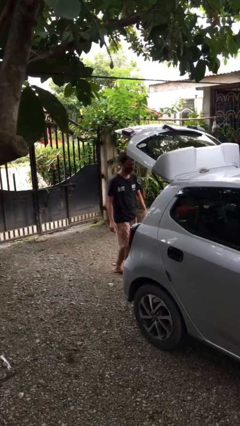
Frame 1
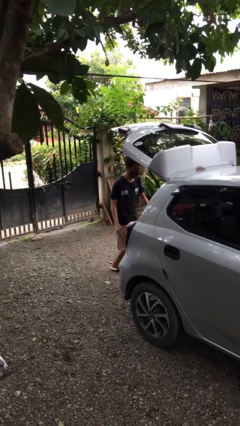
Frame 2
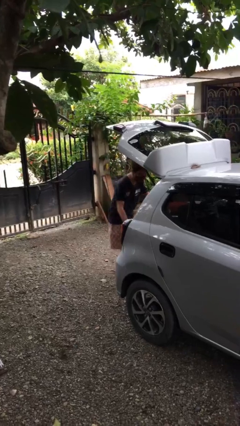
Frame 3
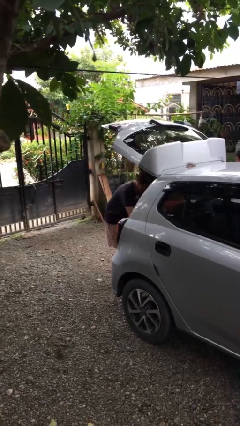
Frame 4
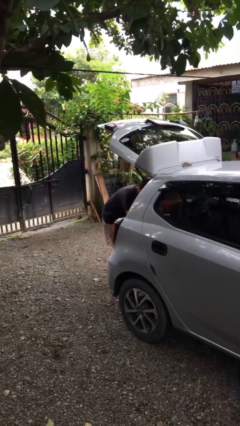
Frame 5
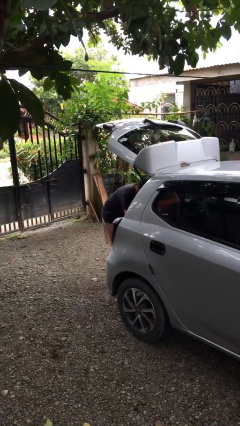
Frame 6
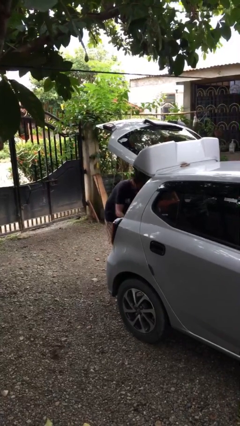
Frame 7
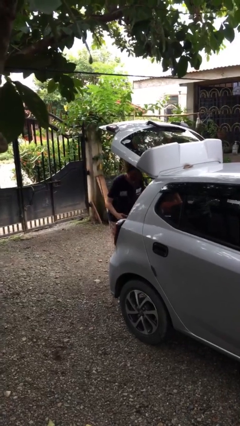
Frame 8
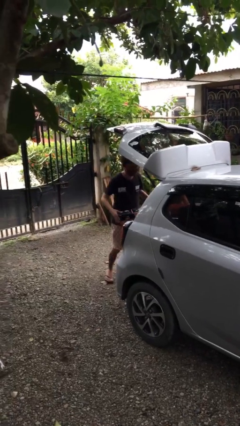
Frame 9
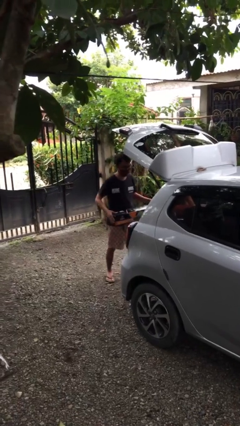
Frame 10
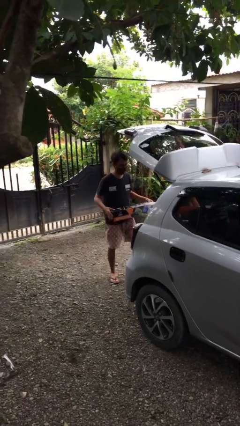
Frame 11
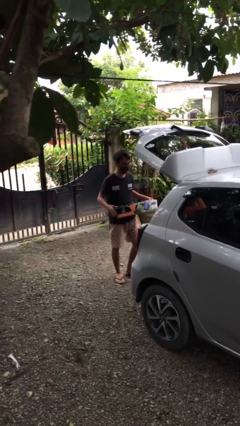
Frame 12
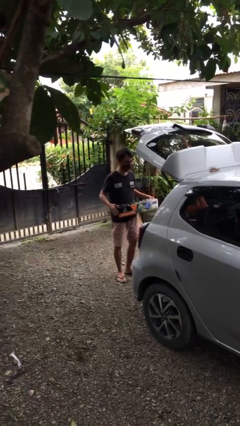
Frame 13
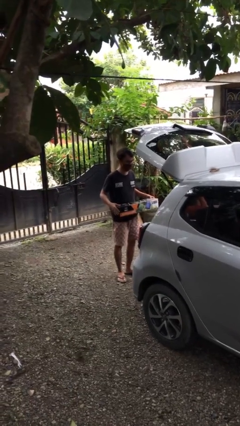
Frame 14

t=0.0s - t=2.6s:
person unloads car

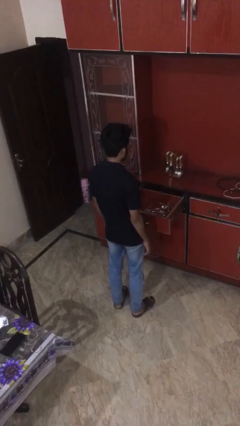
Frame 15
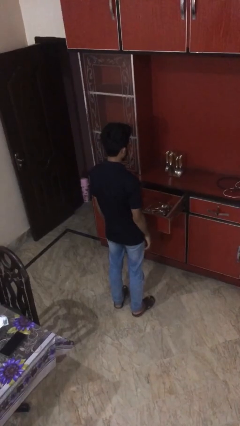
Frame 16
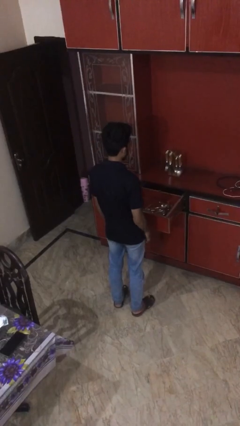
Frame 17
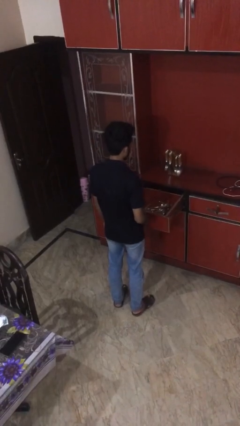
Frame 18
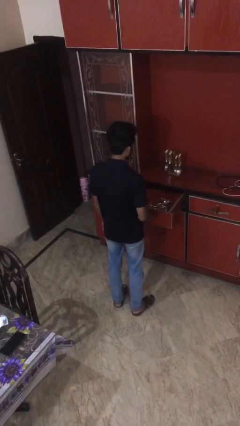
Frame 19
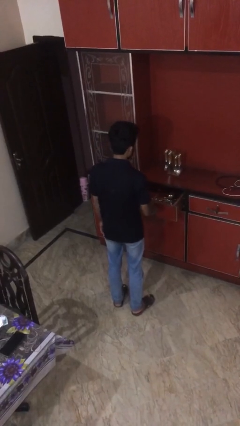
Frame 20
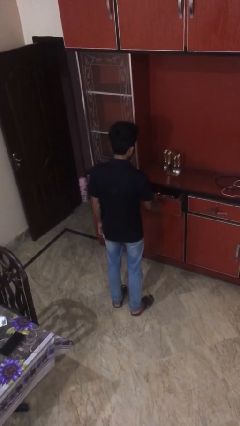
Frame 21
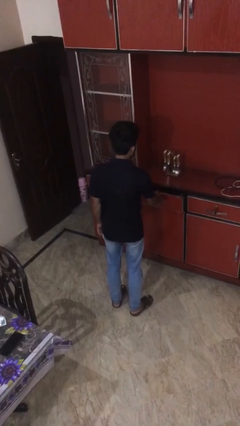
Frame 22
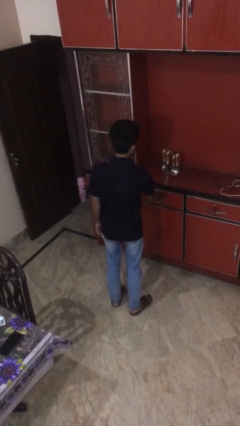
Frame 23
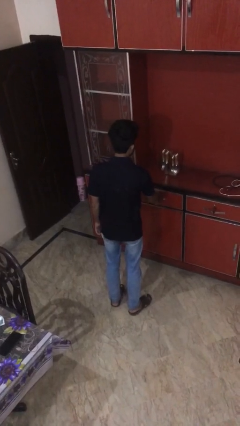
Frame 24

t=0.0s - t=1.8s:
person closes kitchen drawer

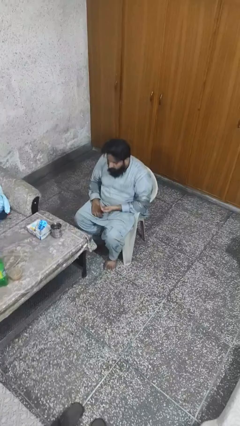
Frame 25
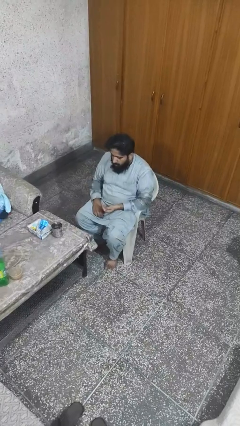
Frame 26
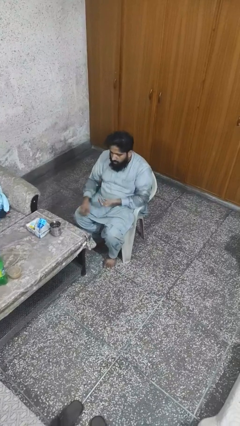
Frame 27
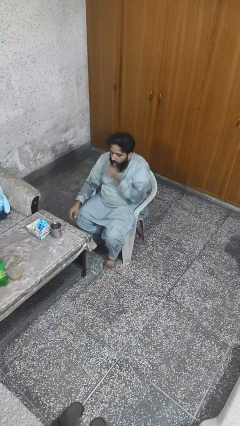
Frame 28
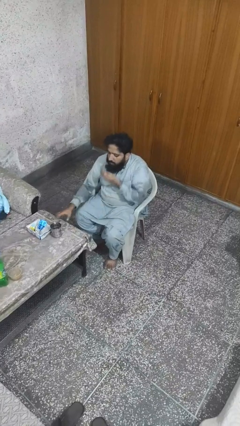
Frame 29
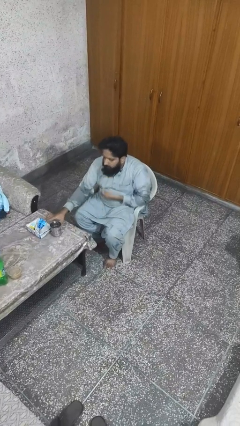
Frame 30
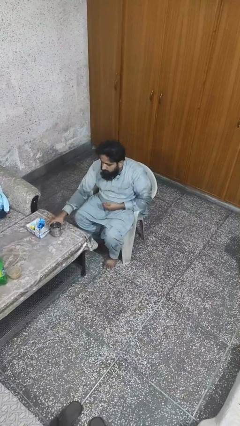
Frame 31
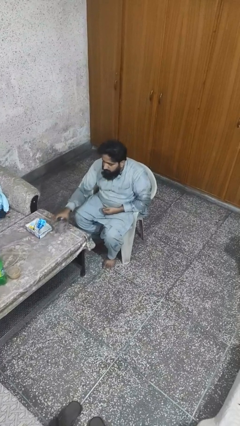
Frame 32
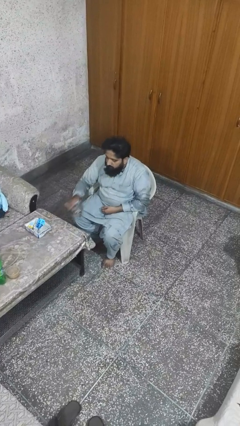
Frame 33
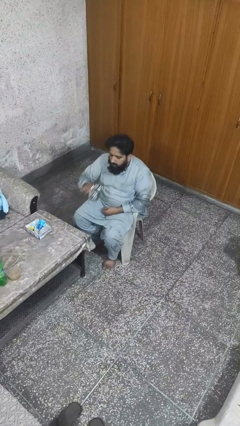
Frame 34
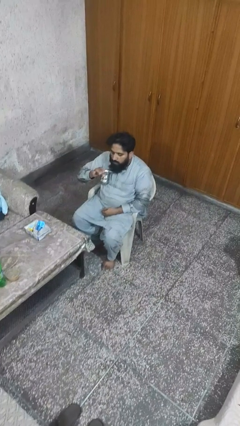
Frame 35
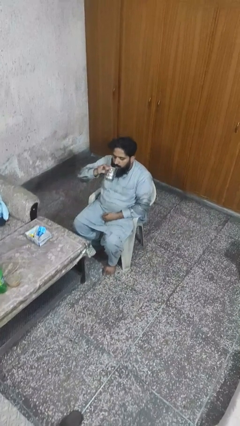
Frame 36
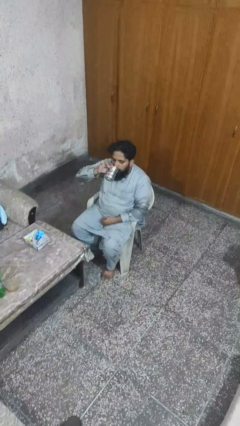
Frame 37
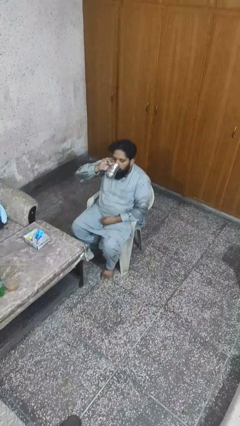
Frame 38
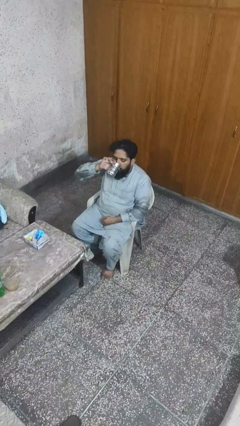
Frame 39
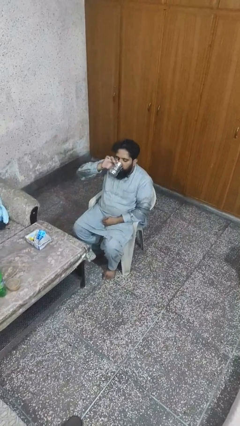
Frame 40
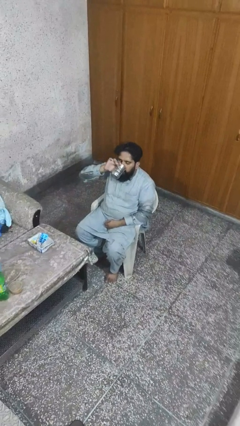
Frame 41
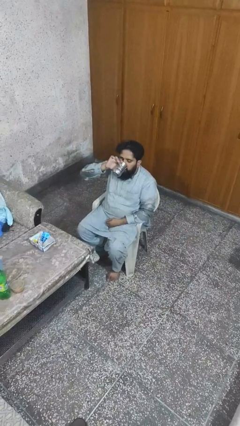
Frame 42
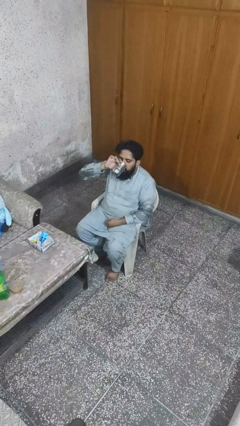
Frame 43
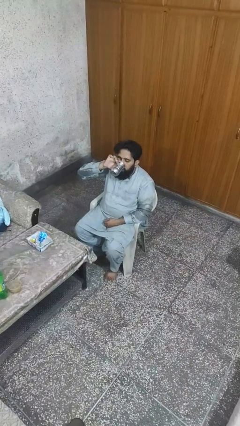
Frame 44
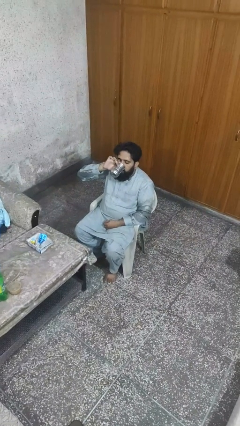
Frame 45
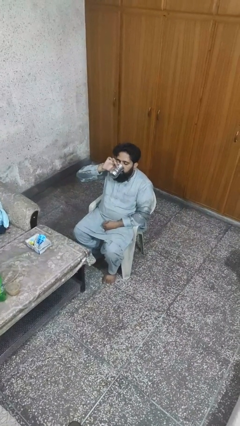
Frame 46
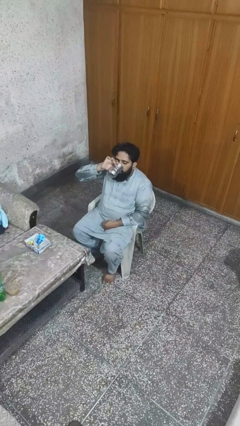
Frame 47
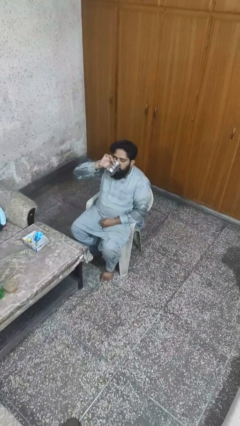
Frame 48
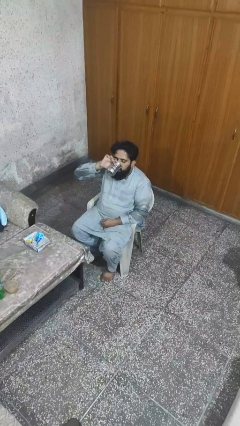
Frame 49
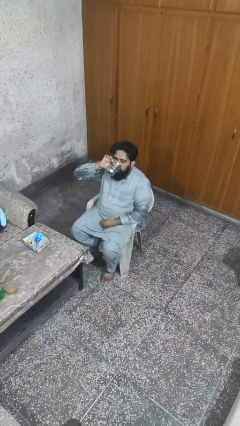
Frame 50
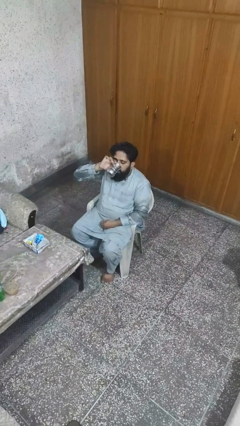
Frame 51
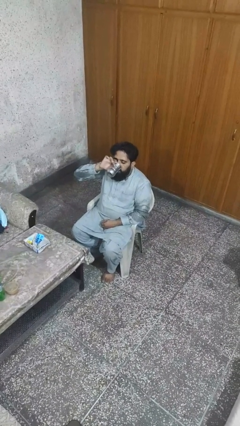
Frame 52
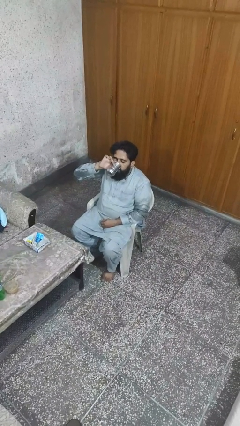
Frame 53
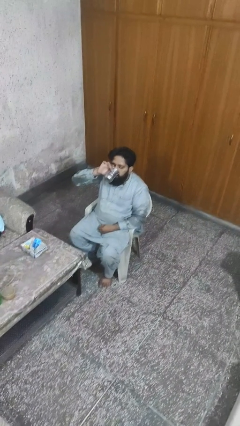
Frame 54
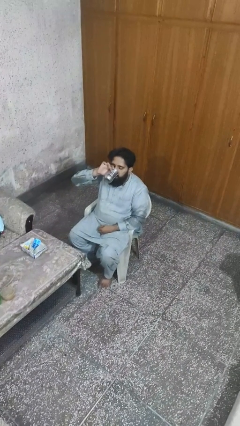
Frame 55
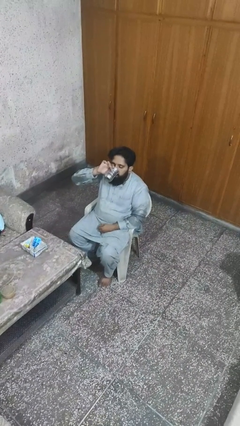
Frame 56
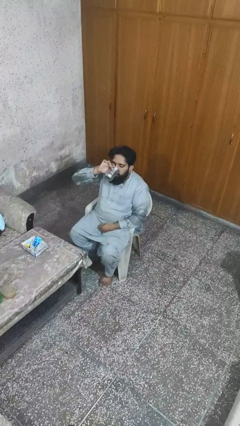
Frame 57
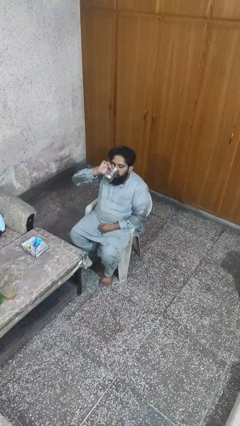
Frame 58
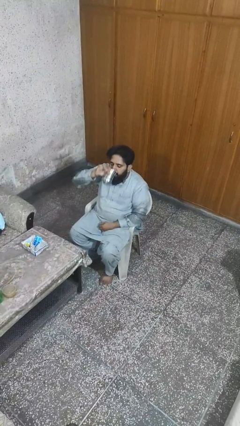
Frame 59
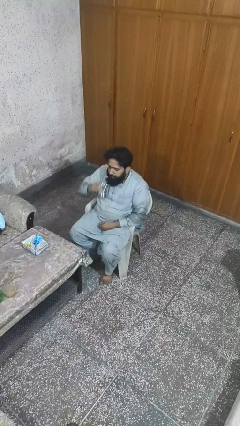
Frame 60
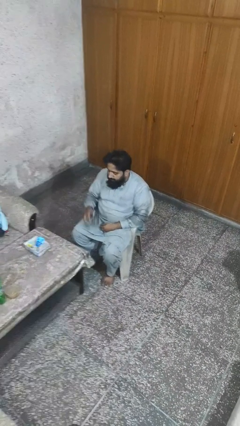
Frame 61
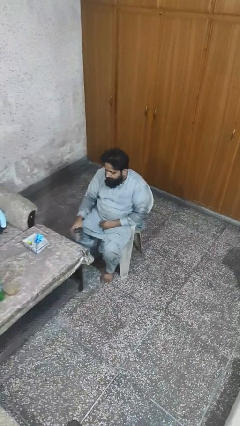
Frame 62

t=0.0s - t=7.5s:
person drinks from cup

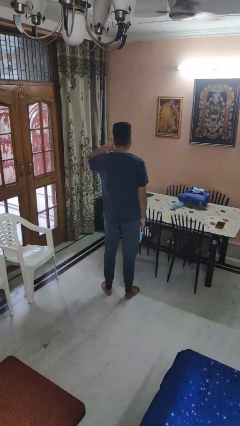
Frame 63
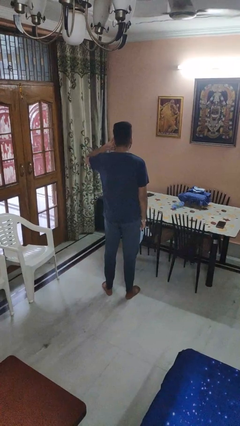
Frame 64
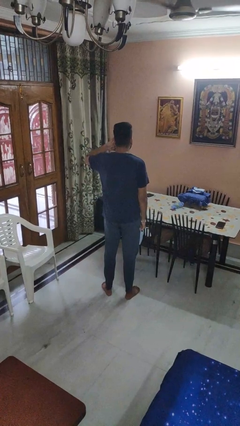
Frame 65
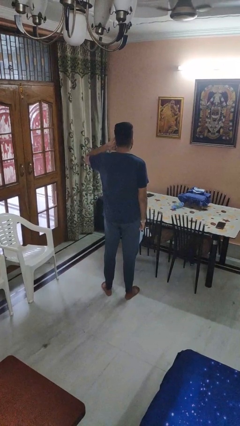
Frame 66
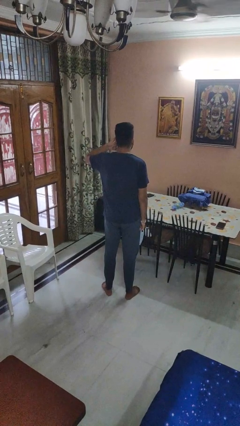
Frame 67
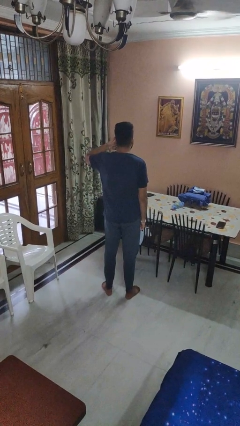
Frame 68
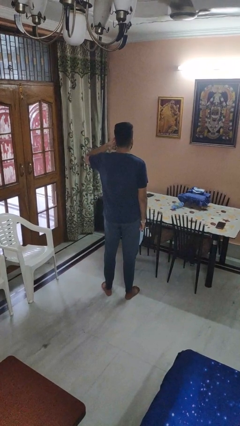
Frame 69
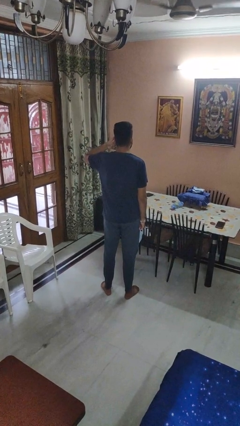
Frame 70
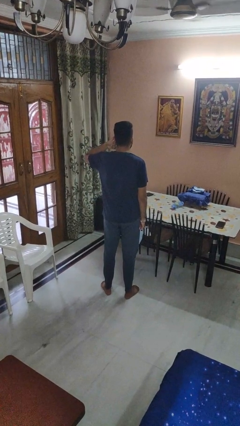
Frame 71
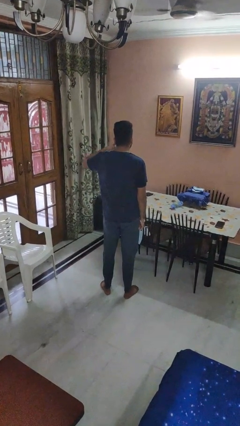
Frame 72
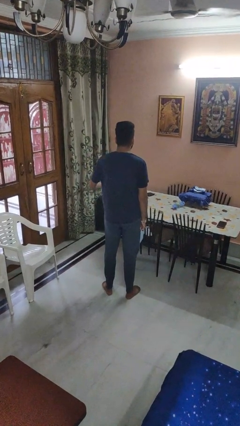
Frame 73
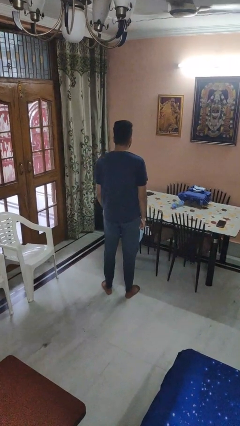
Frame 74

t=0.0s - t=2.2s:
person gestures call me

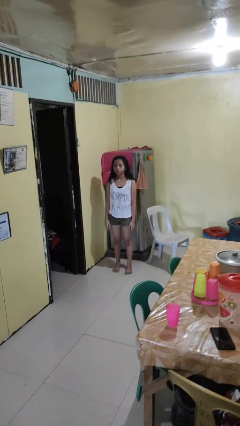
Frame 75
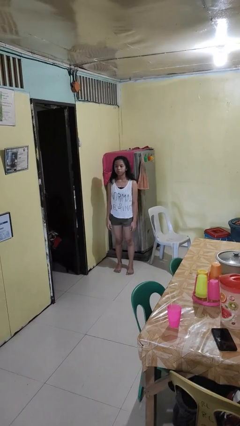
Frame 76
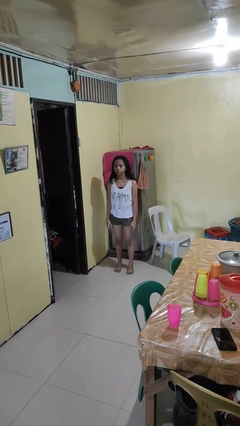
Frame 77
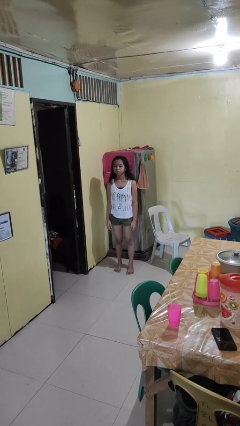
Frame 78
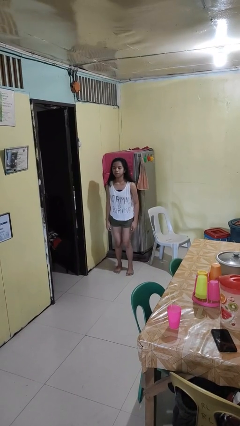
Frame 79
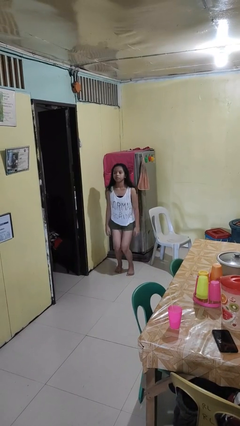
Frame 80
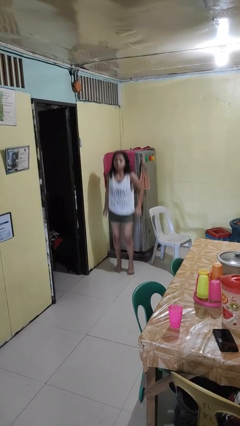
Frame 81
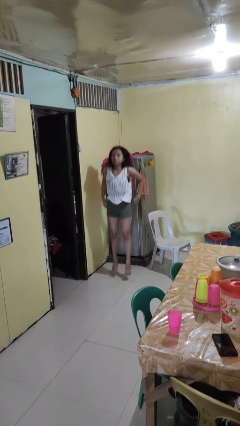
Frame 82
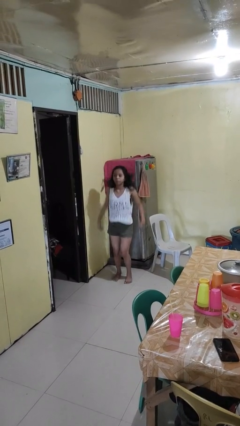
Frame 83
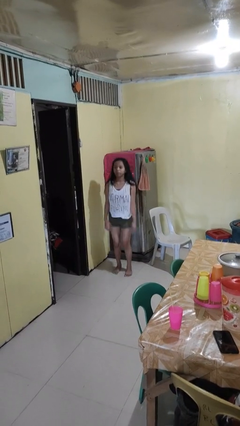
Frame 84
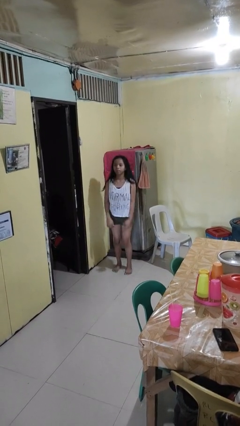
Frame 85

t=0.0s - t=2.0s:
person jumps

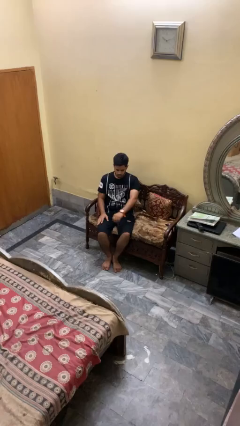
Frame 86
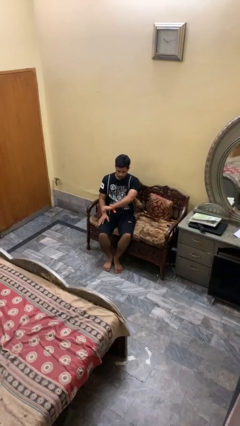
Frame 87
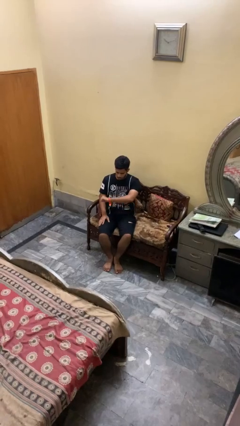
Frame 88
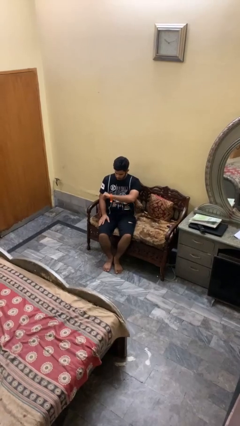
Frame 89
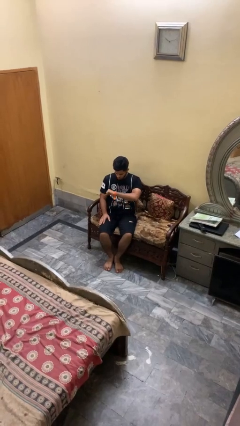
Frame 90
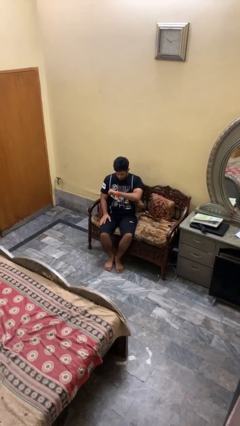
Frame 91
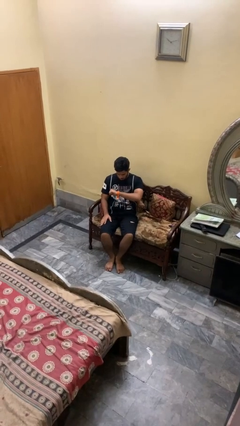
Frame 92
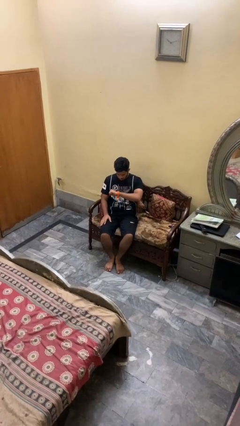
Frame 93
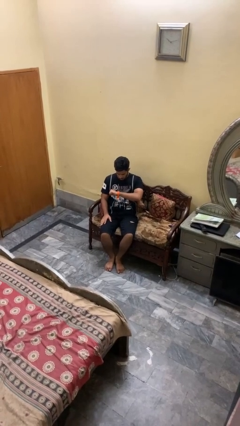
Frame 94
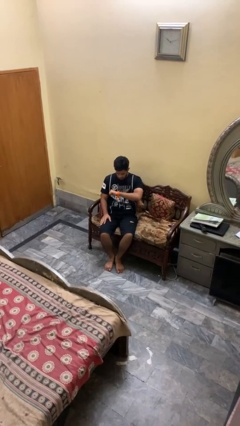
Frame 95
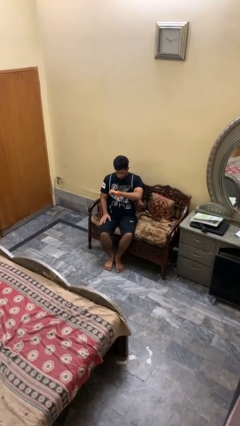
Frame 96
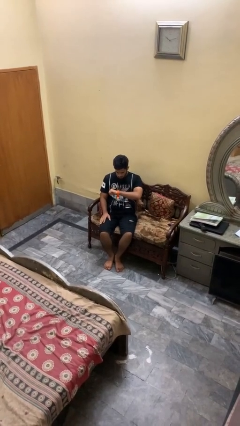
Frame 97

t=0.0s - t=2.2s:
person looks at wristwatch
